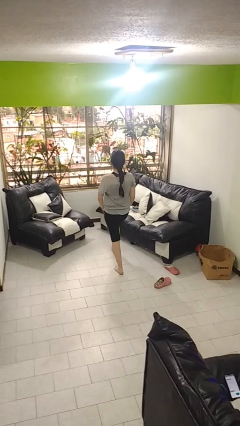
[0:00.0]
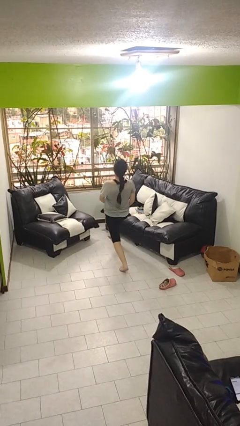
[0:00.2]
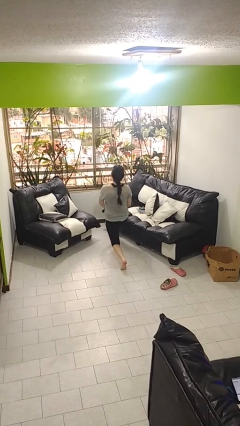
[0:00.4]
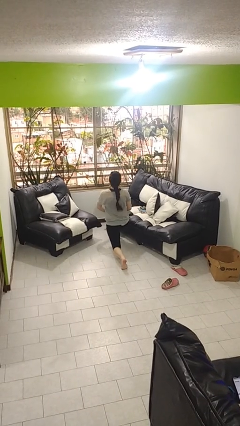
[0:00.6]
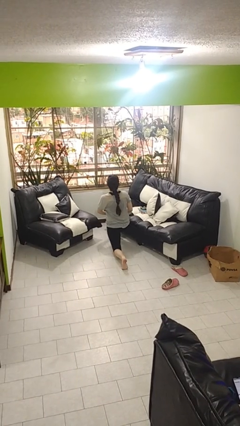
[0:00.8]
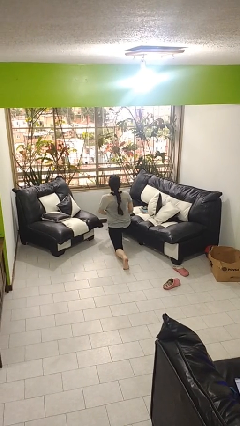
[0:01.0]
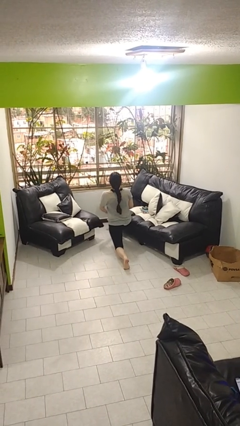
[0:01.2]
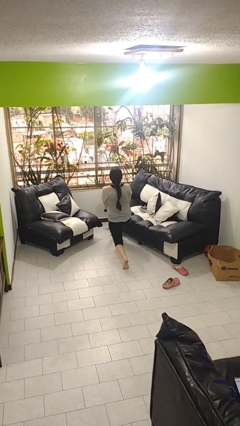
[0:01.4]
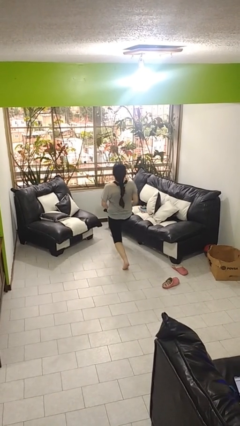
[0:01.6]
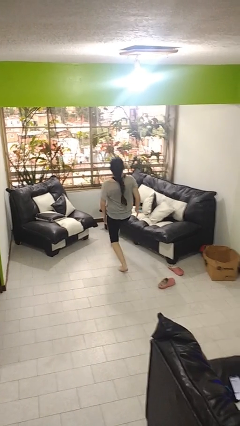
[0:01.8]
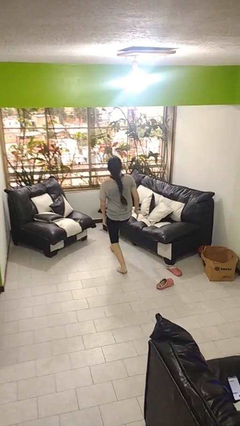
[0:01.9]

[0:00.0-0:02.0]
person exercises with lunges

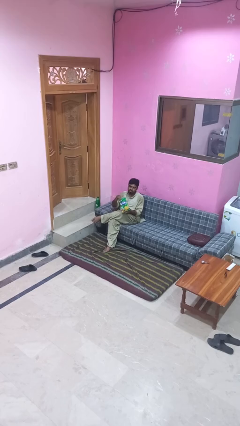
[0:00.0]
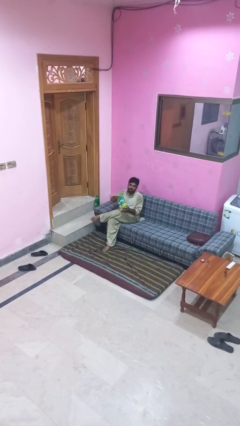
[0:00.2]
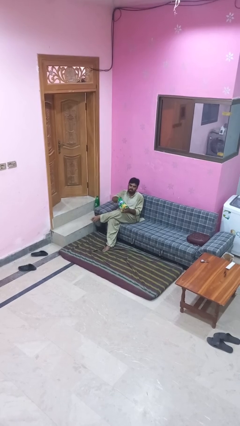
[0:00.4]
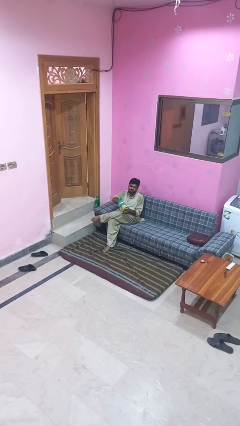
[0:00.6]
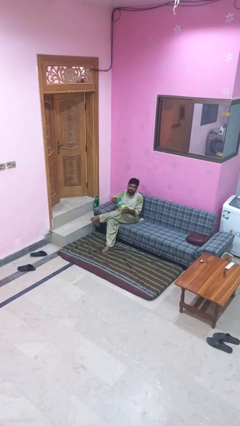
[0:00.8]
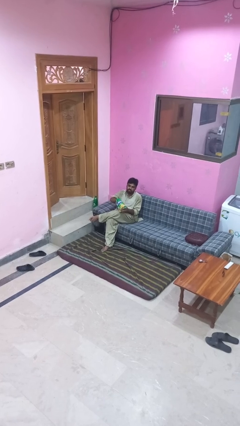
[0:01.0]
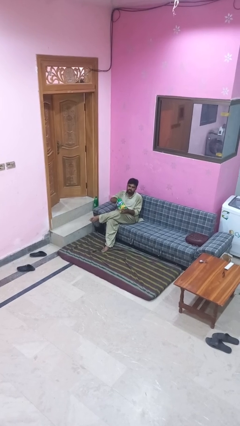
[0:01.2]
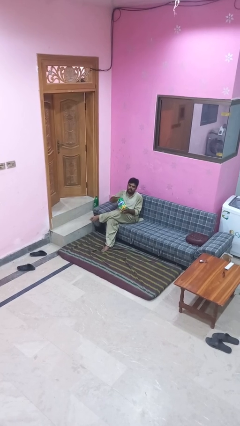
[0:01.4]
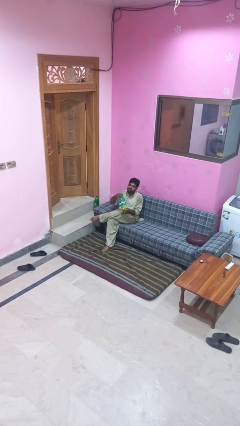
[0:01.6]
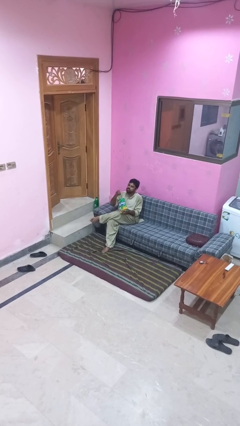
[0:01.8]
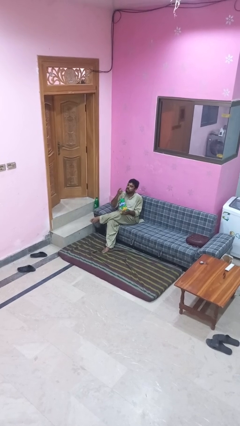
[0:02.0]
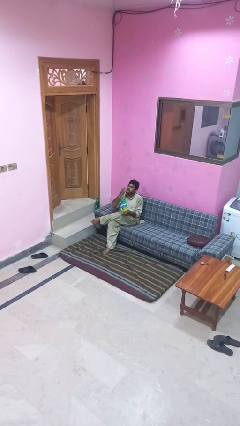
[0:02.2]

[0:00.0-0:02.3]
person eats snack from bag

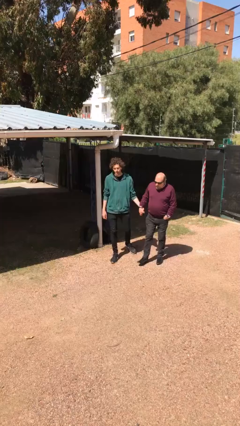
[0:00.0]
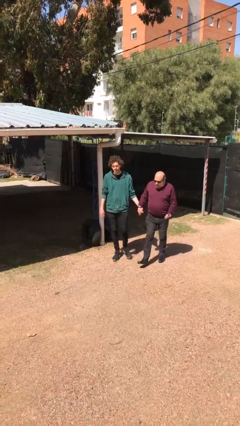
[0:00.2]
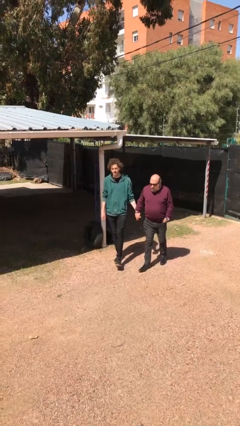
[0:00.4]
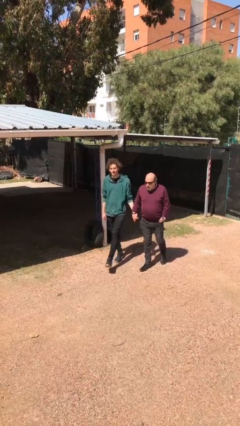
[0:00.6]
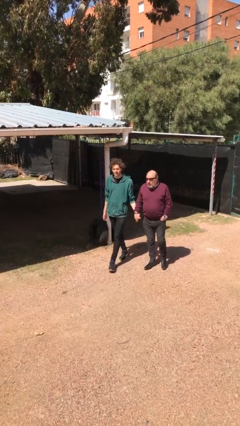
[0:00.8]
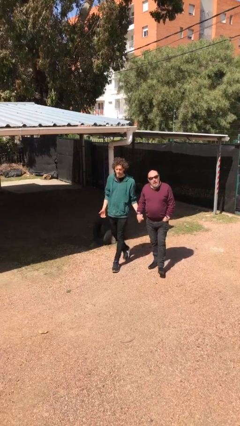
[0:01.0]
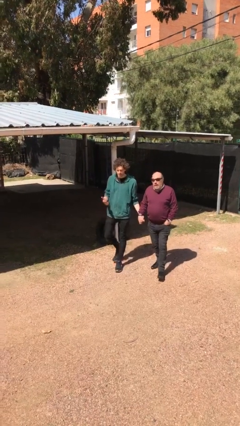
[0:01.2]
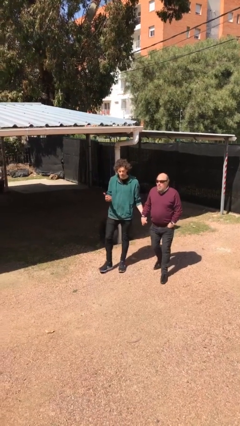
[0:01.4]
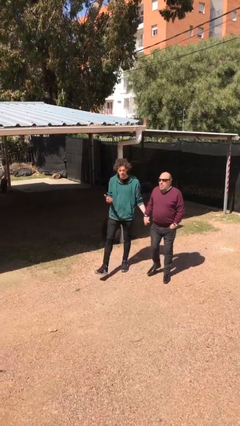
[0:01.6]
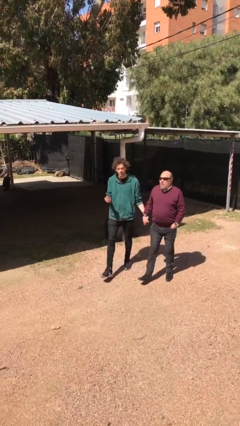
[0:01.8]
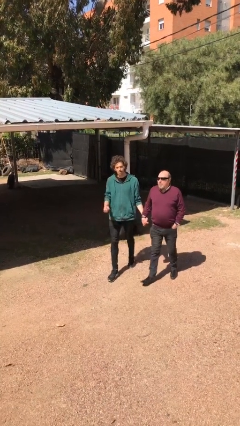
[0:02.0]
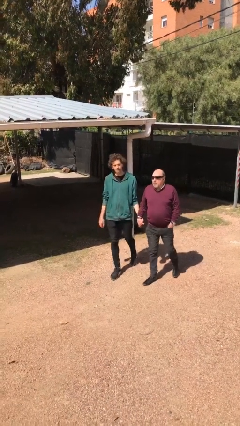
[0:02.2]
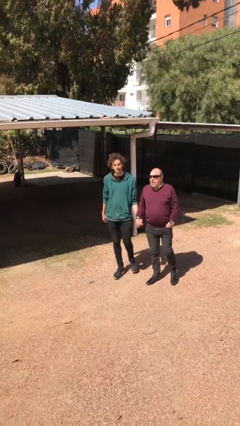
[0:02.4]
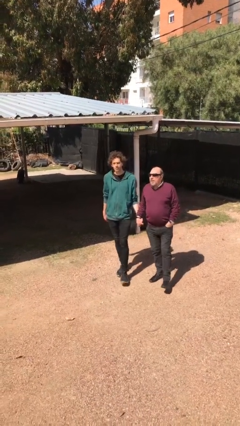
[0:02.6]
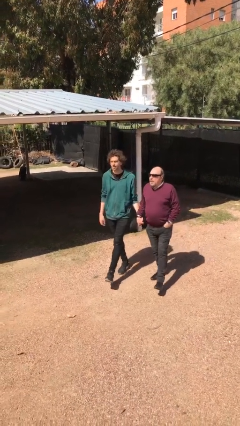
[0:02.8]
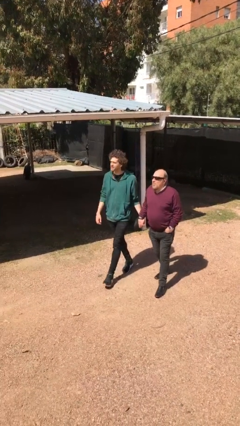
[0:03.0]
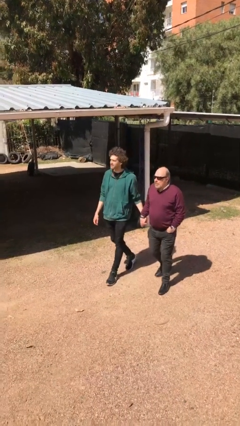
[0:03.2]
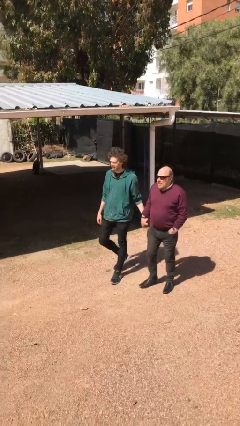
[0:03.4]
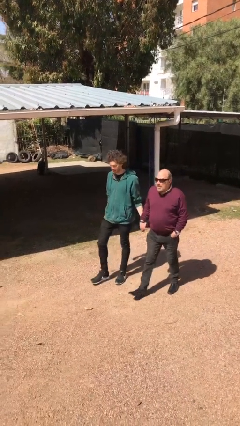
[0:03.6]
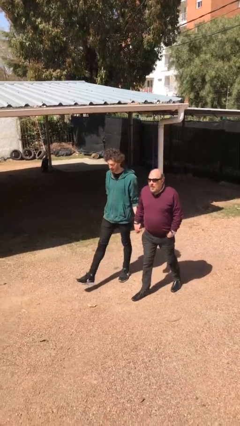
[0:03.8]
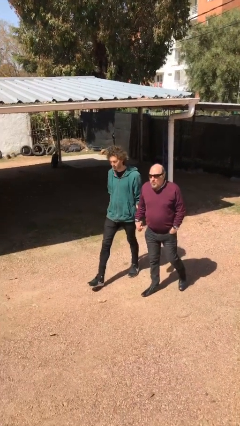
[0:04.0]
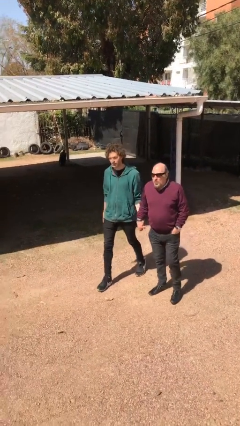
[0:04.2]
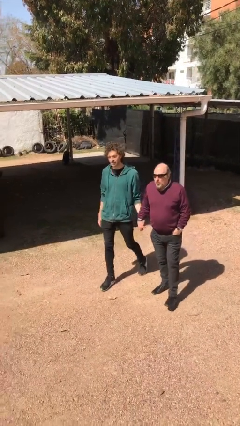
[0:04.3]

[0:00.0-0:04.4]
person holds hand

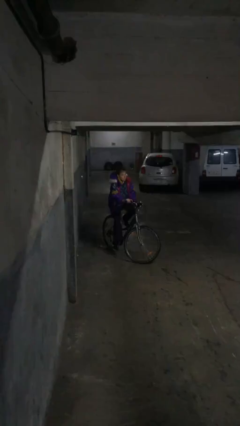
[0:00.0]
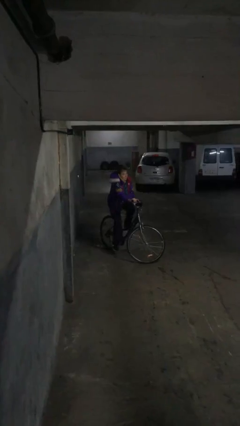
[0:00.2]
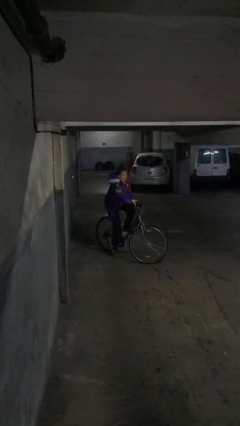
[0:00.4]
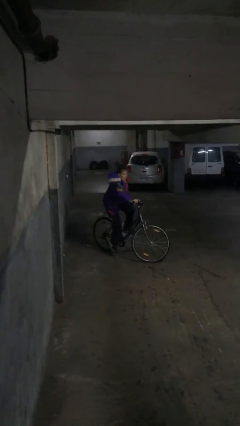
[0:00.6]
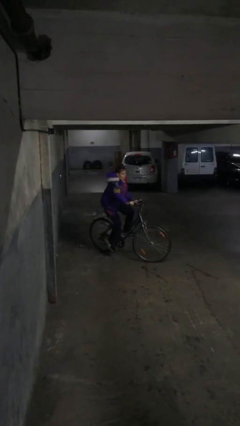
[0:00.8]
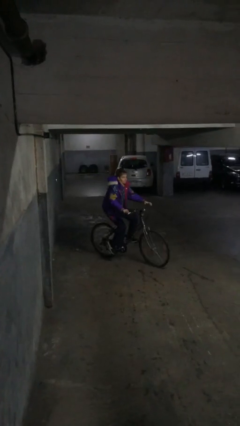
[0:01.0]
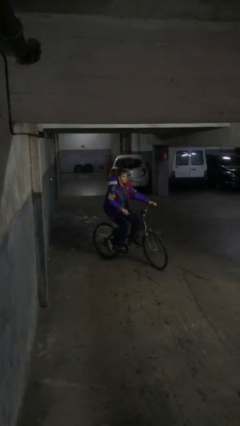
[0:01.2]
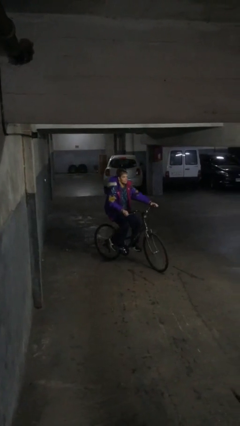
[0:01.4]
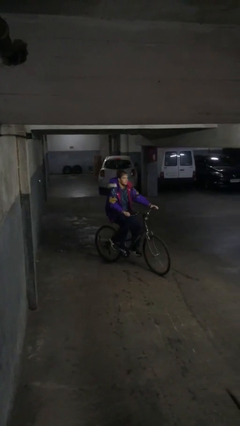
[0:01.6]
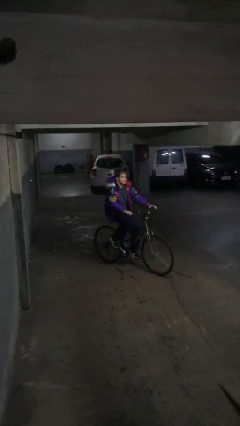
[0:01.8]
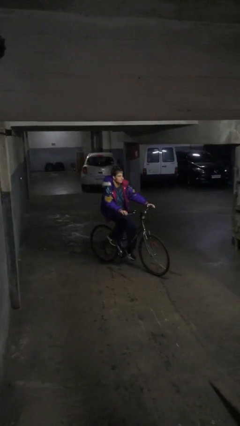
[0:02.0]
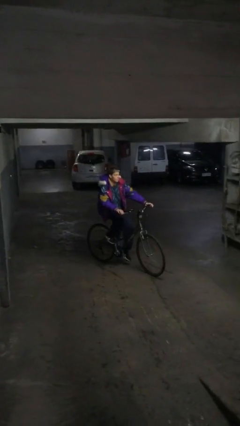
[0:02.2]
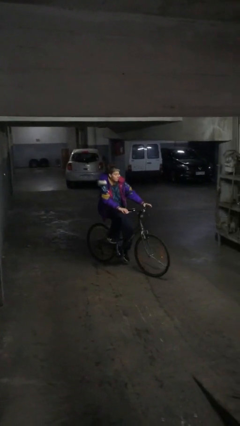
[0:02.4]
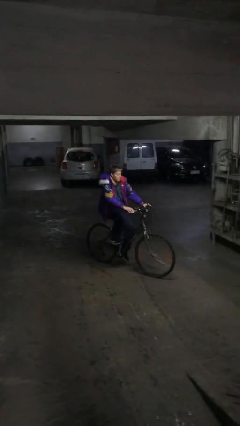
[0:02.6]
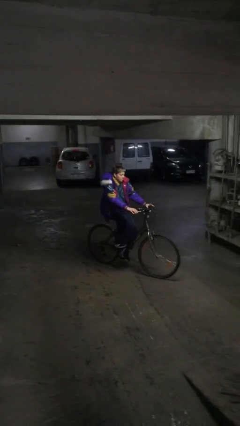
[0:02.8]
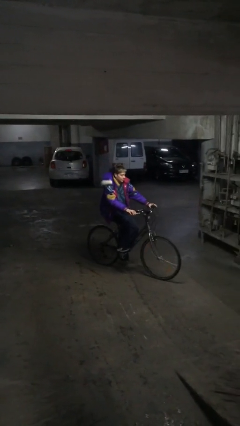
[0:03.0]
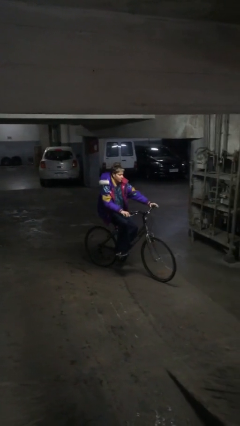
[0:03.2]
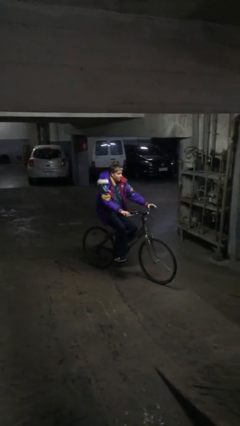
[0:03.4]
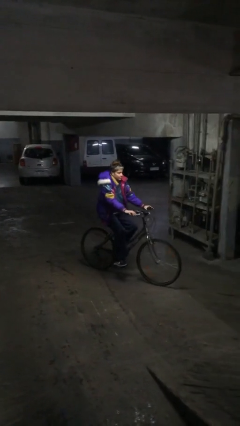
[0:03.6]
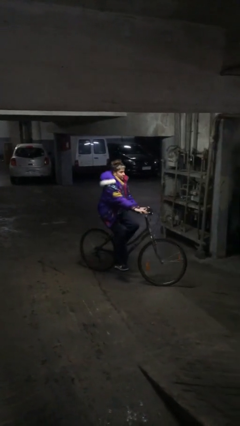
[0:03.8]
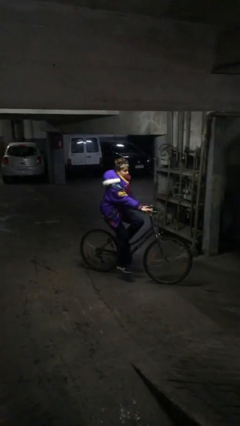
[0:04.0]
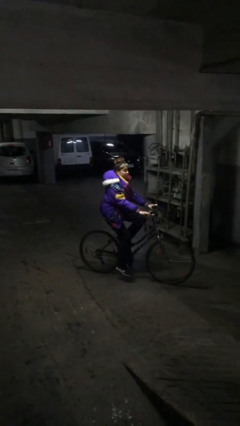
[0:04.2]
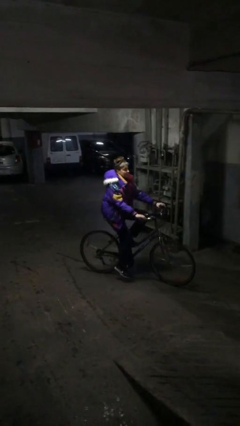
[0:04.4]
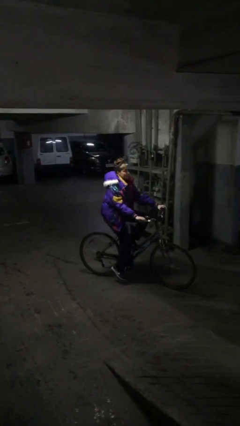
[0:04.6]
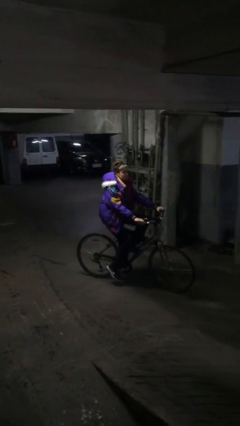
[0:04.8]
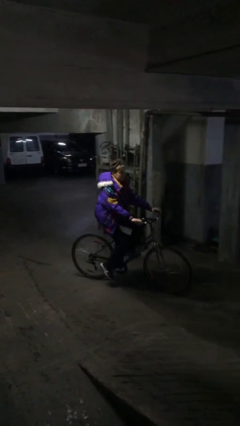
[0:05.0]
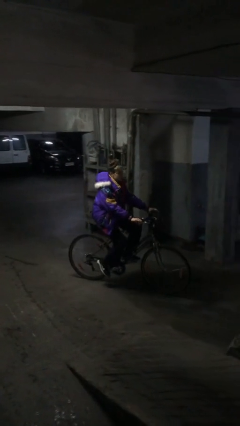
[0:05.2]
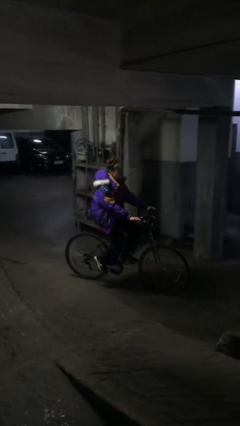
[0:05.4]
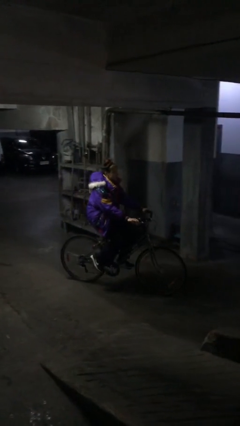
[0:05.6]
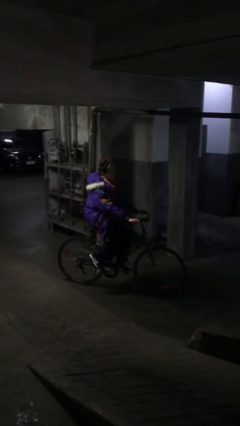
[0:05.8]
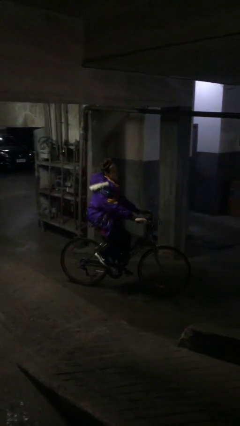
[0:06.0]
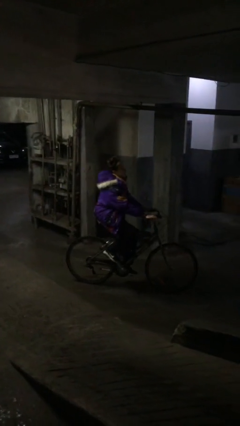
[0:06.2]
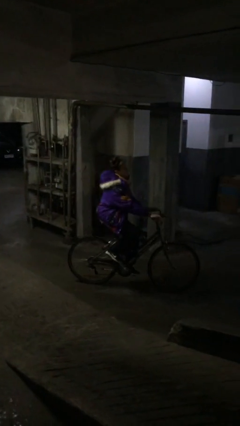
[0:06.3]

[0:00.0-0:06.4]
person rides bicycle

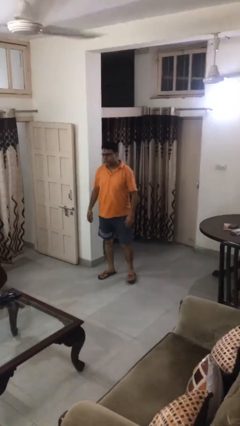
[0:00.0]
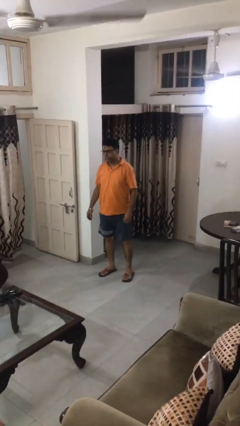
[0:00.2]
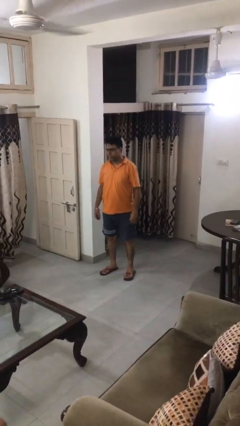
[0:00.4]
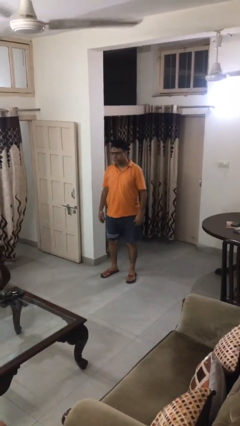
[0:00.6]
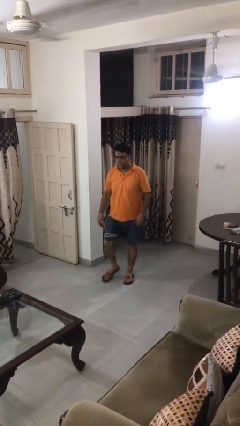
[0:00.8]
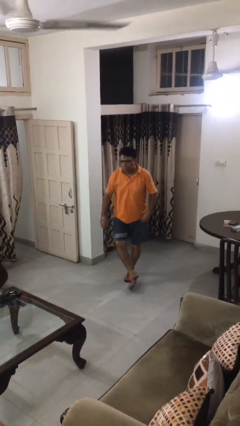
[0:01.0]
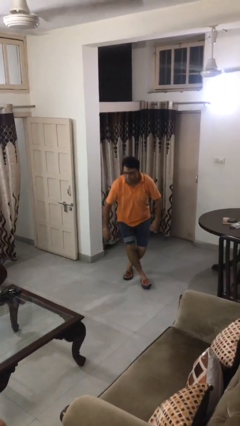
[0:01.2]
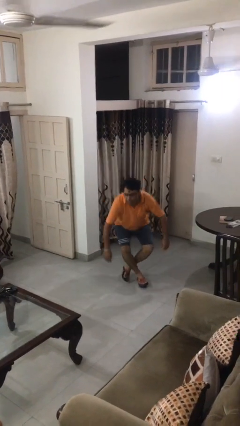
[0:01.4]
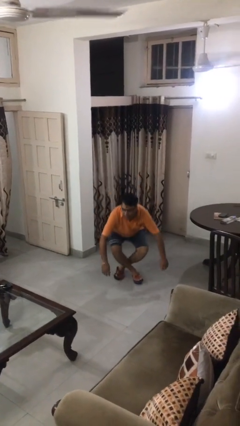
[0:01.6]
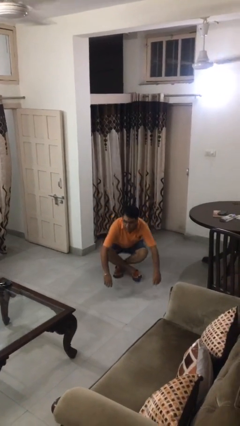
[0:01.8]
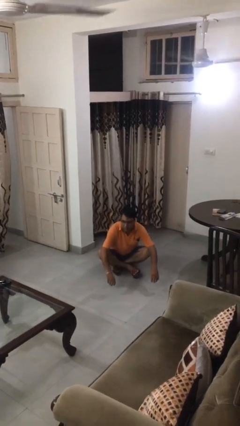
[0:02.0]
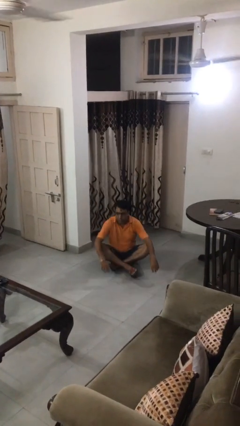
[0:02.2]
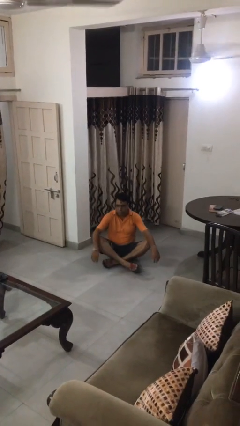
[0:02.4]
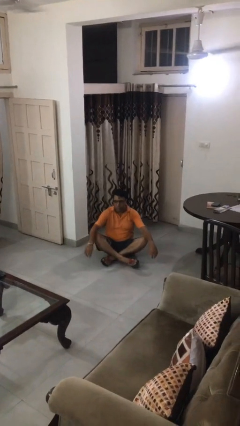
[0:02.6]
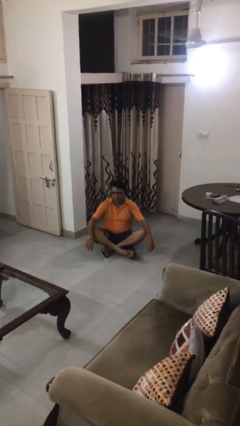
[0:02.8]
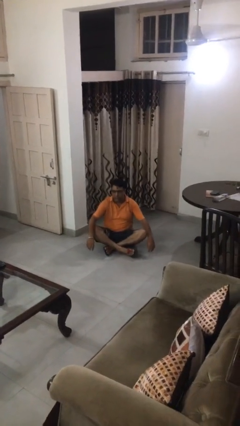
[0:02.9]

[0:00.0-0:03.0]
person sits crisscross
